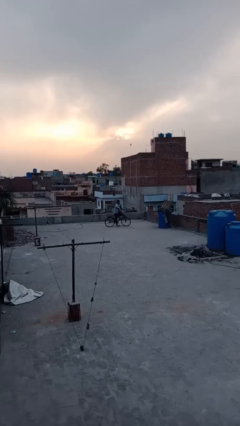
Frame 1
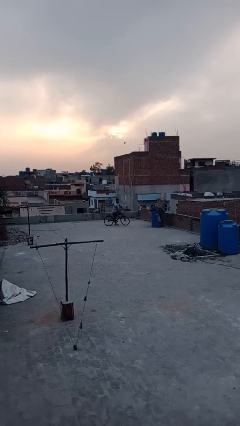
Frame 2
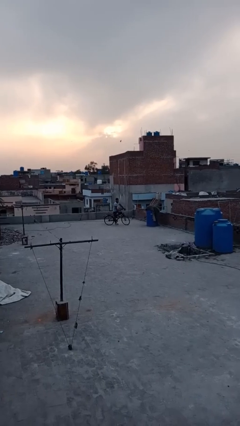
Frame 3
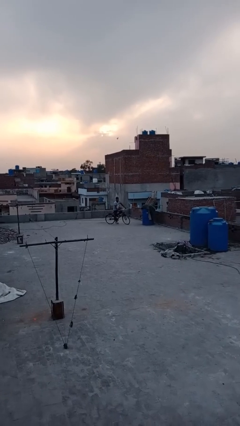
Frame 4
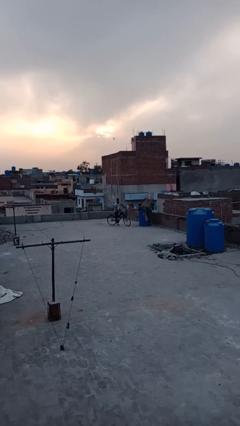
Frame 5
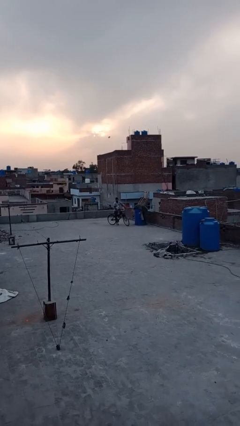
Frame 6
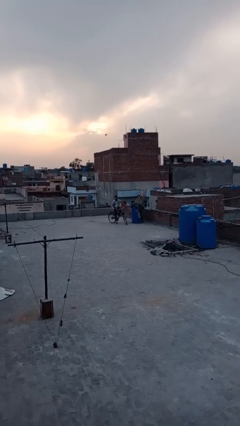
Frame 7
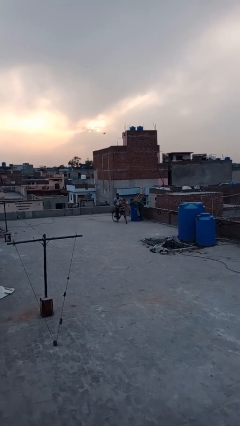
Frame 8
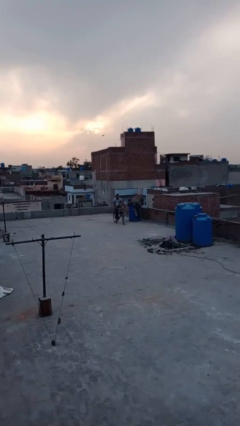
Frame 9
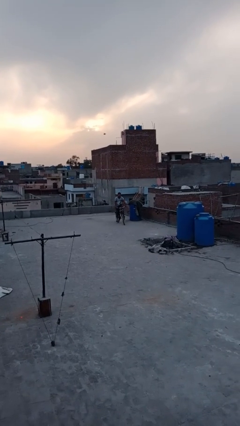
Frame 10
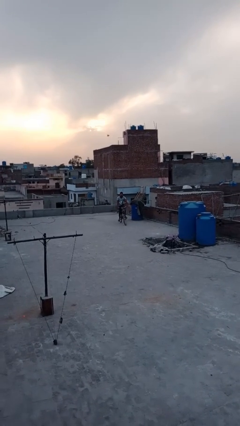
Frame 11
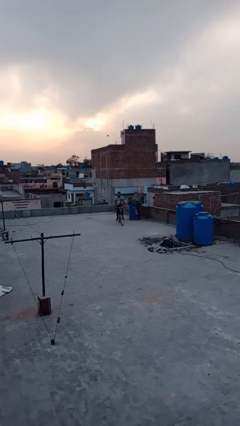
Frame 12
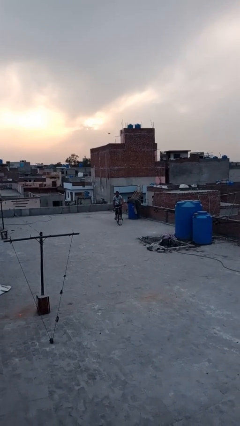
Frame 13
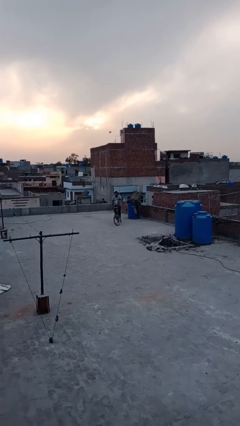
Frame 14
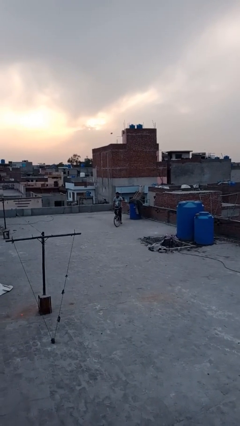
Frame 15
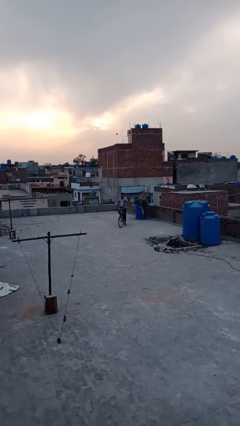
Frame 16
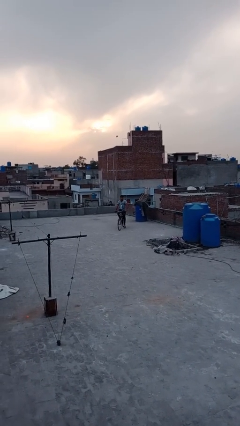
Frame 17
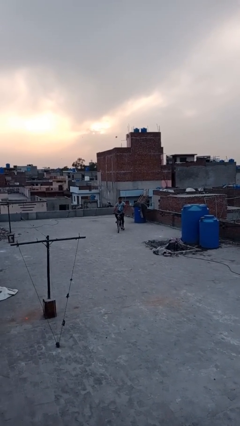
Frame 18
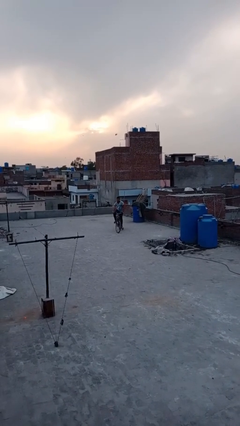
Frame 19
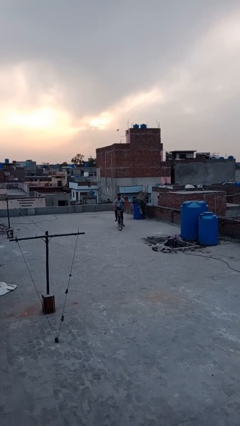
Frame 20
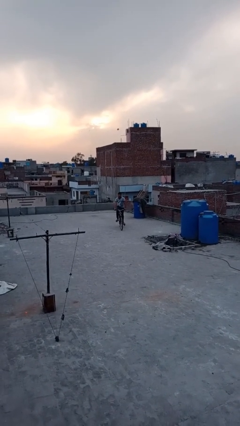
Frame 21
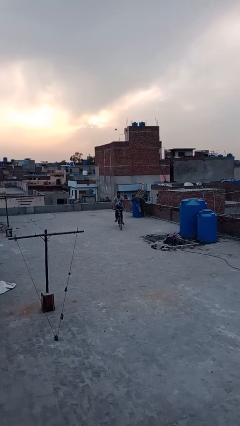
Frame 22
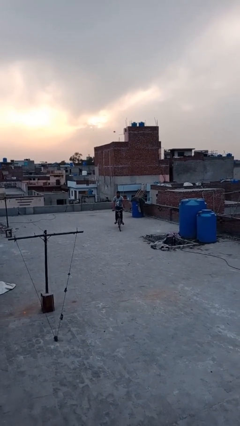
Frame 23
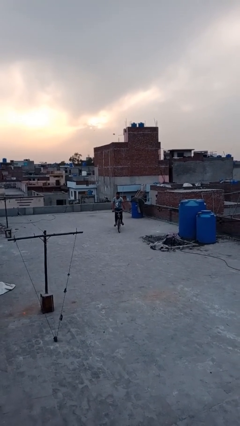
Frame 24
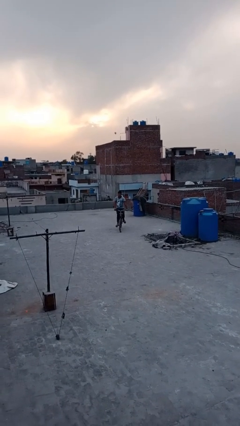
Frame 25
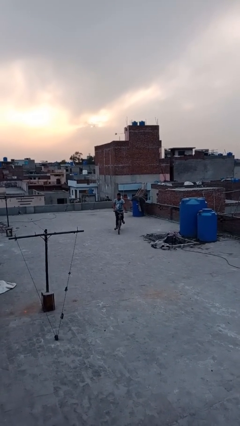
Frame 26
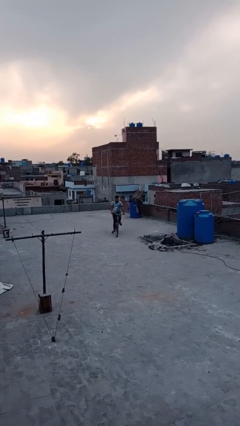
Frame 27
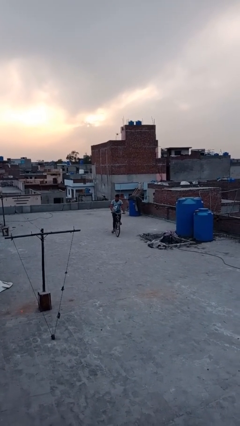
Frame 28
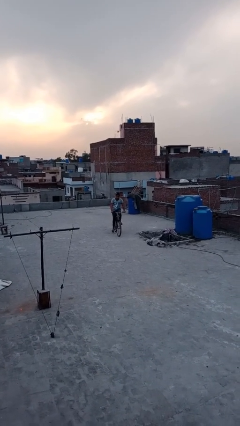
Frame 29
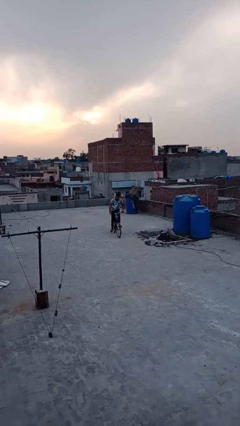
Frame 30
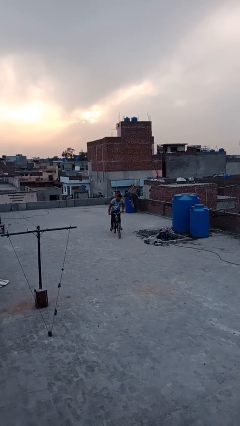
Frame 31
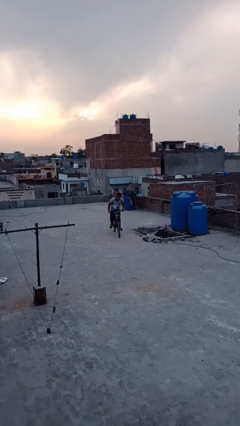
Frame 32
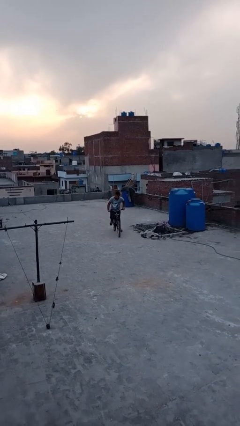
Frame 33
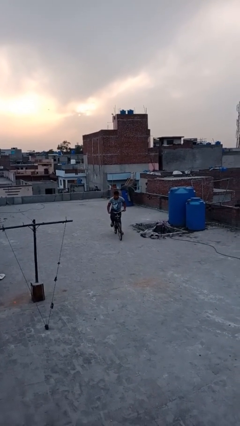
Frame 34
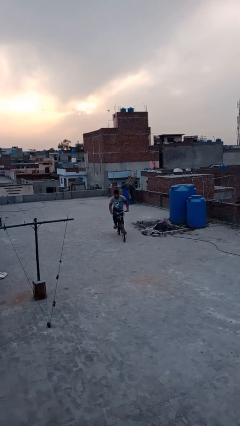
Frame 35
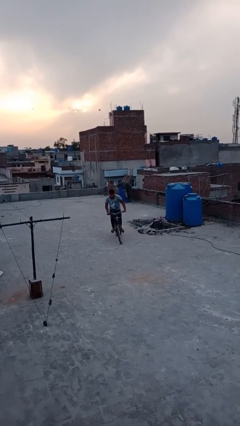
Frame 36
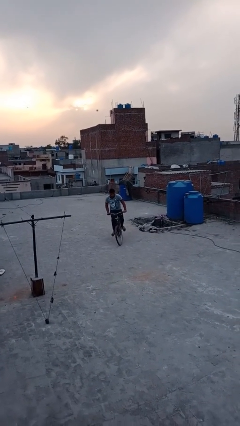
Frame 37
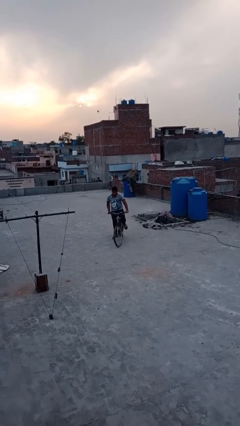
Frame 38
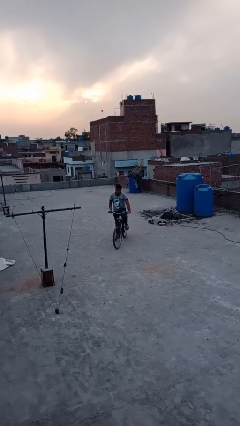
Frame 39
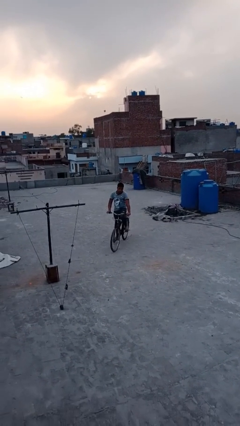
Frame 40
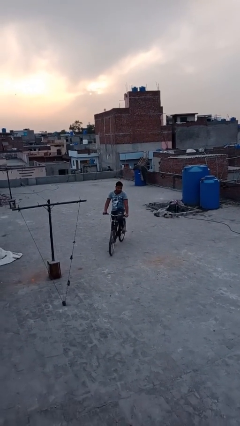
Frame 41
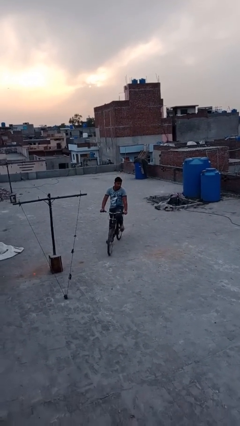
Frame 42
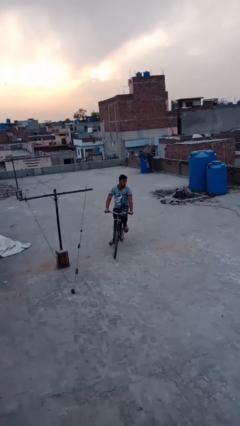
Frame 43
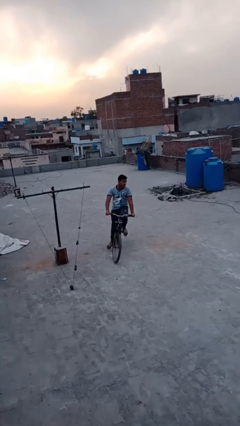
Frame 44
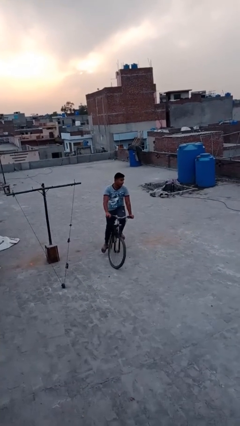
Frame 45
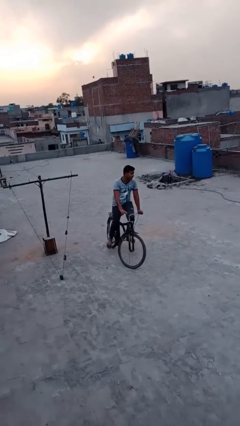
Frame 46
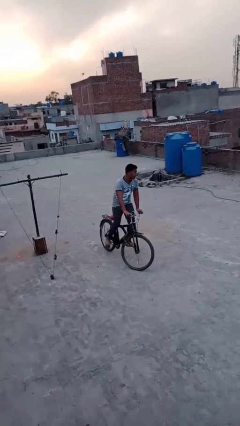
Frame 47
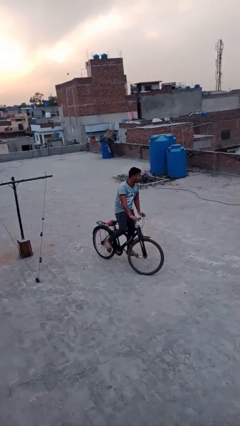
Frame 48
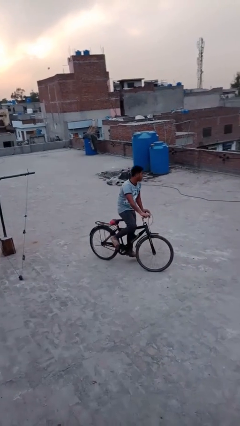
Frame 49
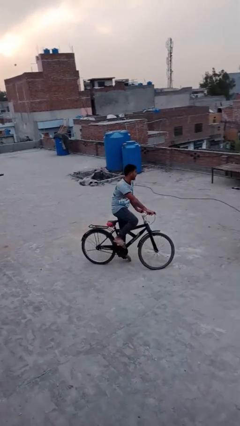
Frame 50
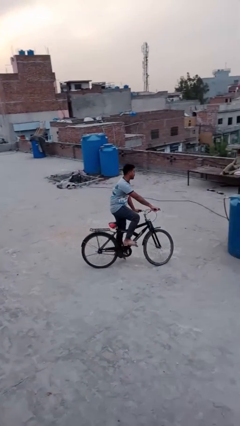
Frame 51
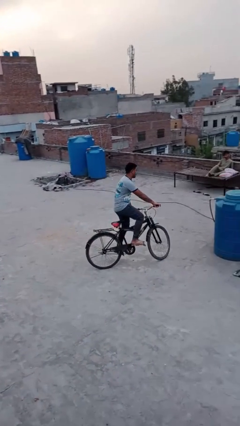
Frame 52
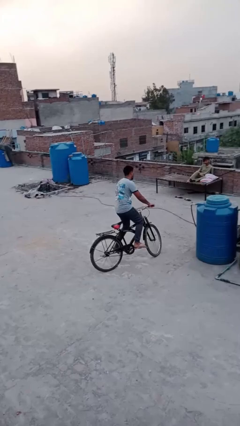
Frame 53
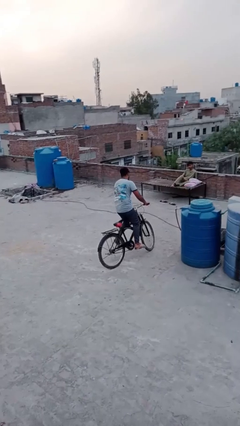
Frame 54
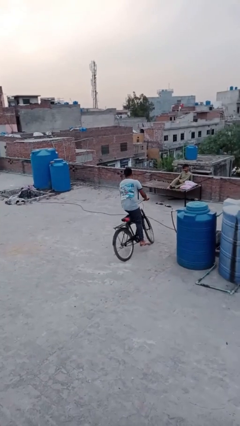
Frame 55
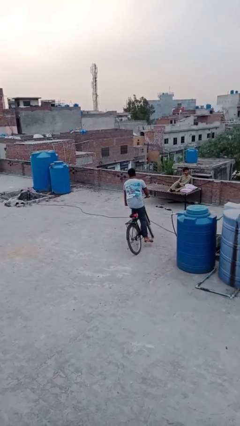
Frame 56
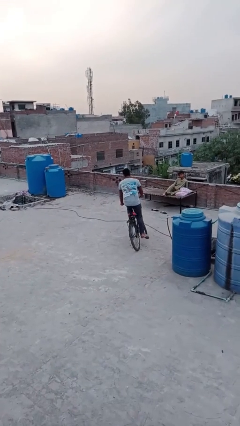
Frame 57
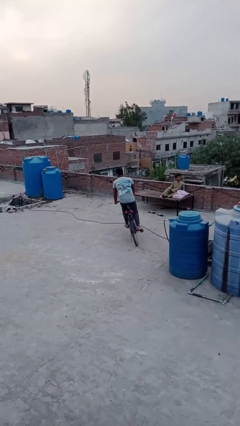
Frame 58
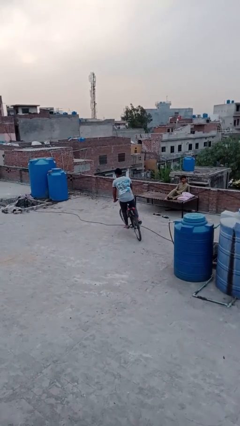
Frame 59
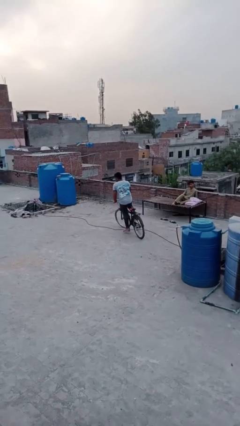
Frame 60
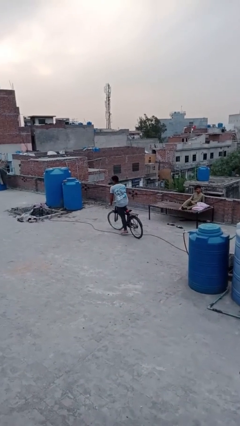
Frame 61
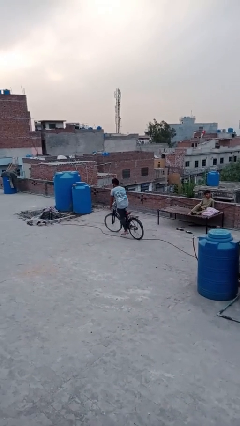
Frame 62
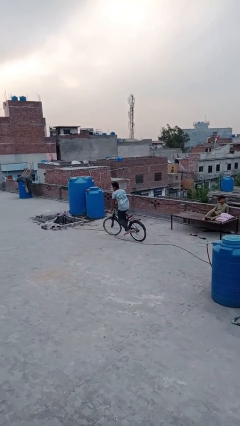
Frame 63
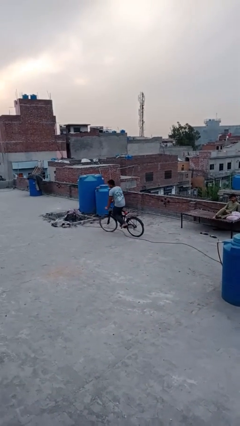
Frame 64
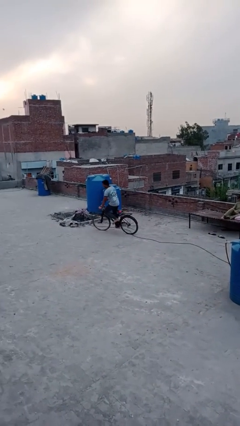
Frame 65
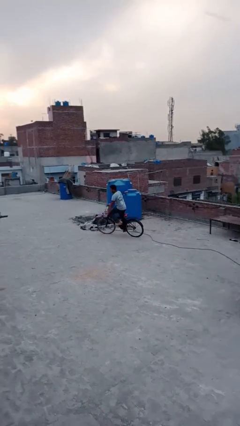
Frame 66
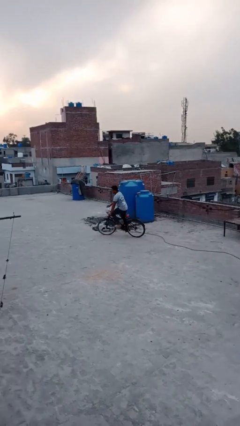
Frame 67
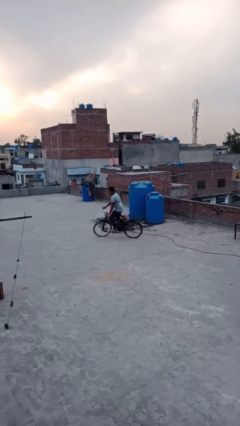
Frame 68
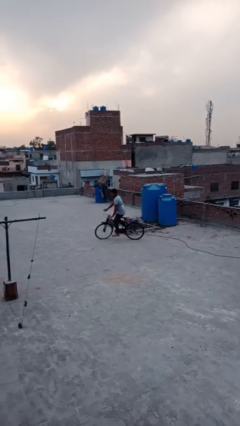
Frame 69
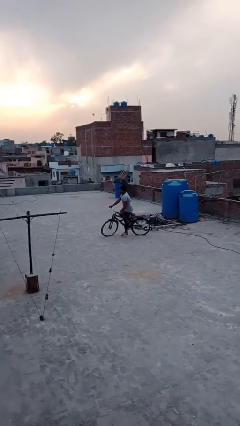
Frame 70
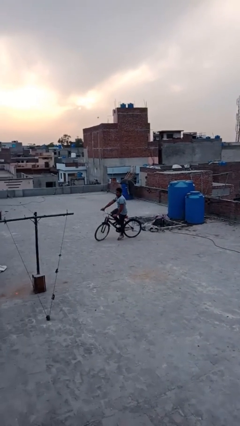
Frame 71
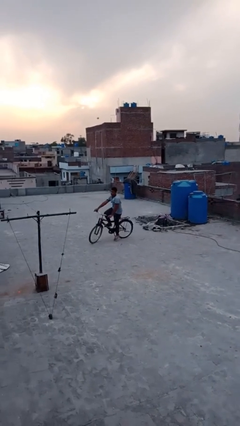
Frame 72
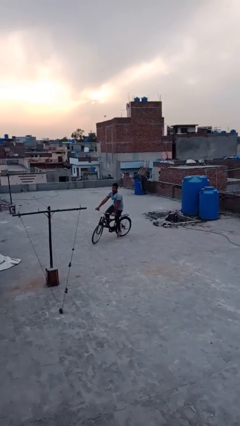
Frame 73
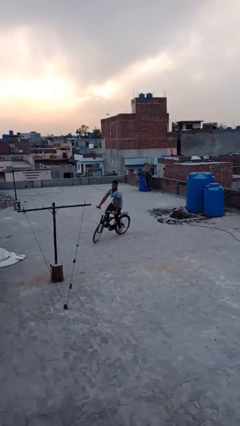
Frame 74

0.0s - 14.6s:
person rides bicycle

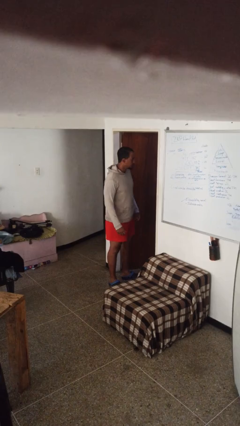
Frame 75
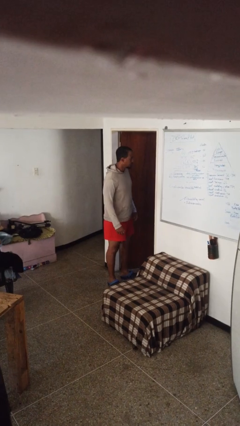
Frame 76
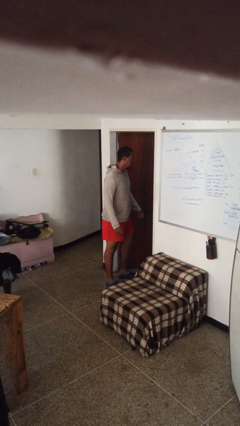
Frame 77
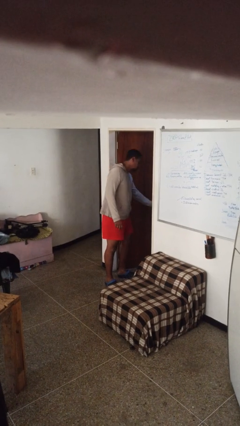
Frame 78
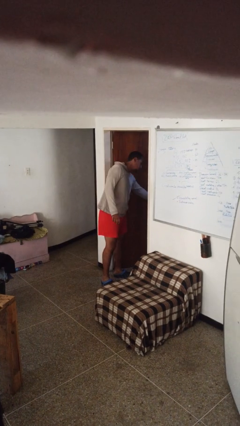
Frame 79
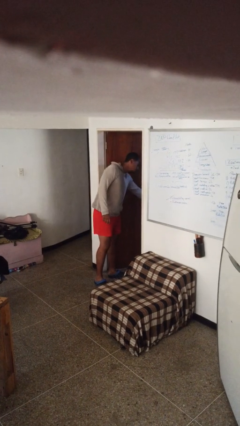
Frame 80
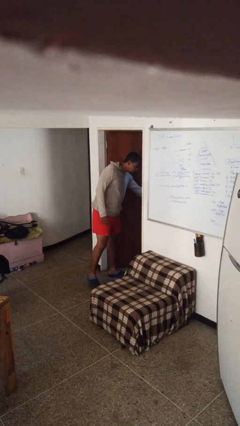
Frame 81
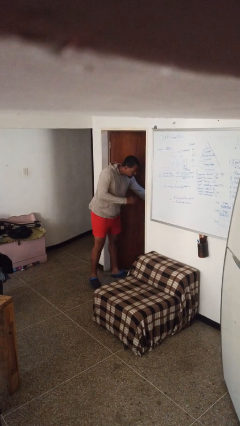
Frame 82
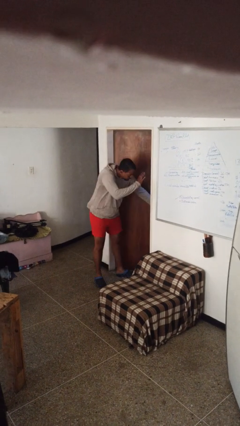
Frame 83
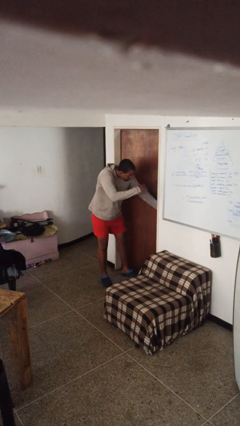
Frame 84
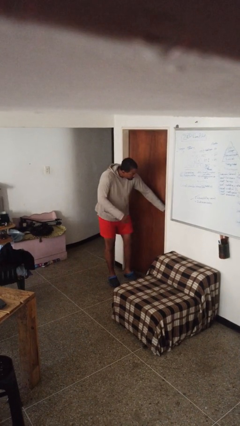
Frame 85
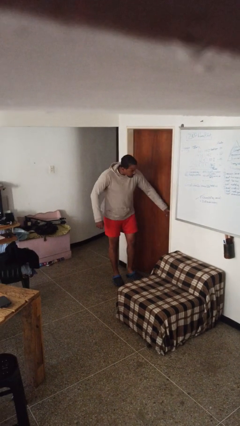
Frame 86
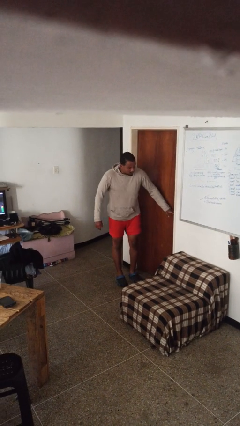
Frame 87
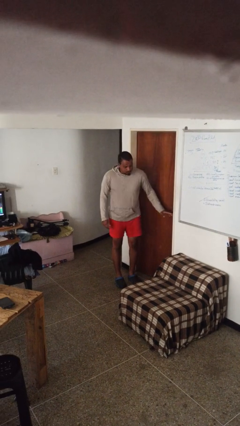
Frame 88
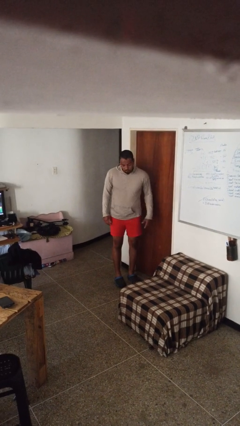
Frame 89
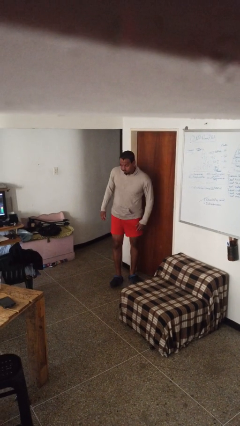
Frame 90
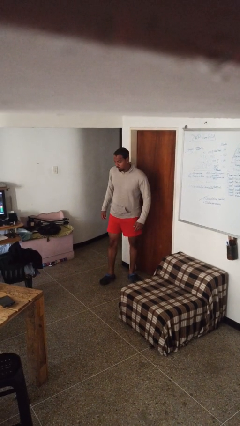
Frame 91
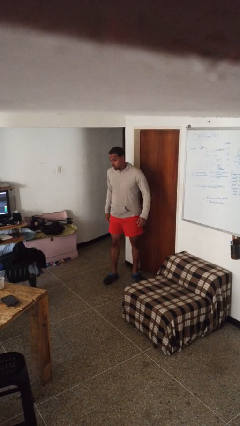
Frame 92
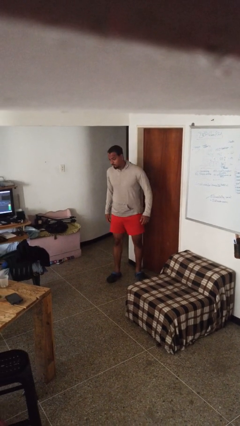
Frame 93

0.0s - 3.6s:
person closes facility door
